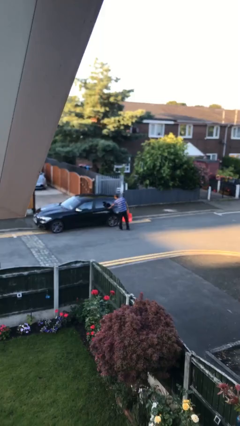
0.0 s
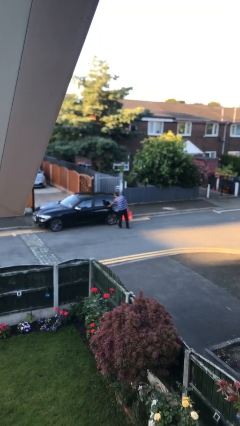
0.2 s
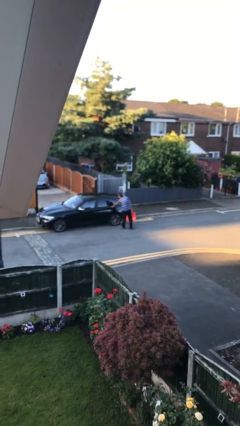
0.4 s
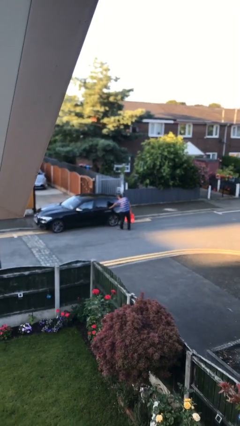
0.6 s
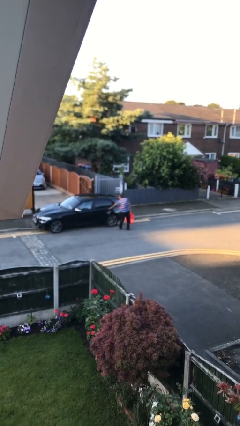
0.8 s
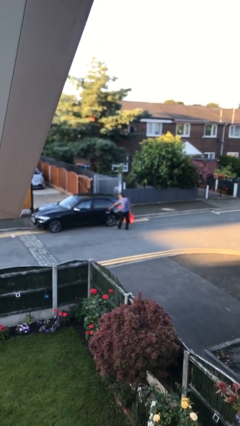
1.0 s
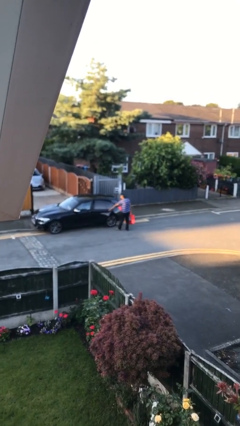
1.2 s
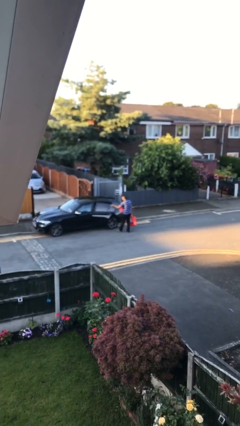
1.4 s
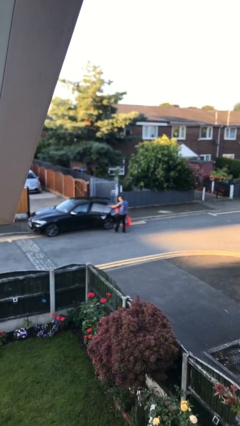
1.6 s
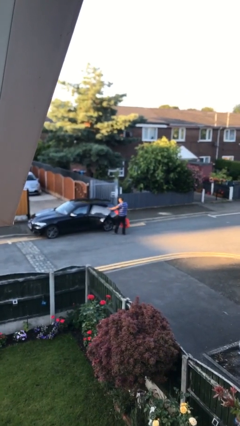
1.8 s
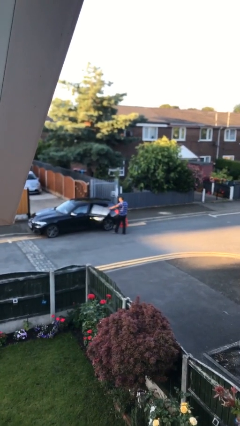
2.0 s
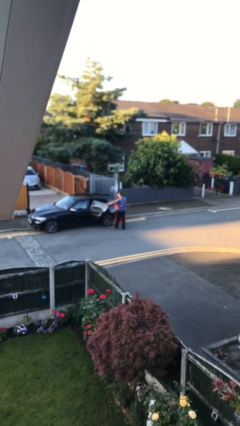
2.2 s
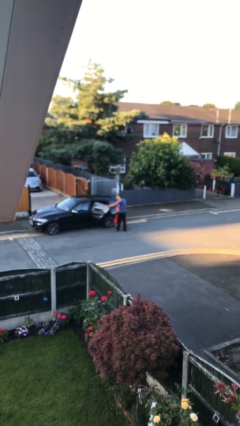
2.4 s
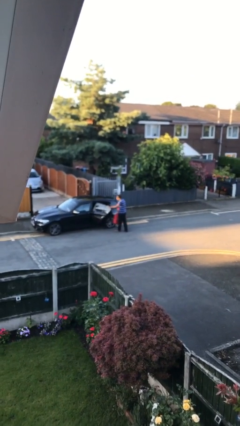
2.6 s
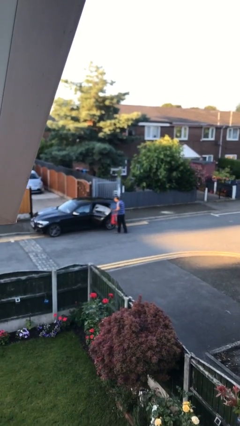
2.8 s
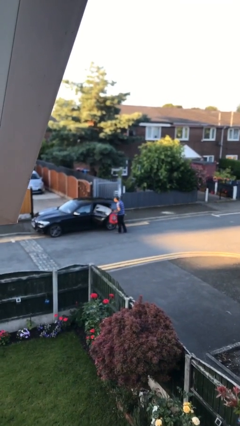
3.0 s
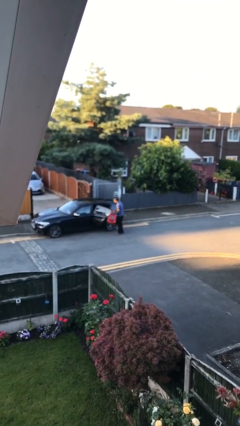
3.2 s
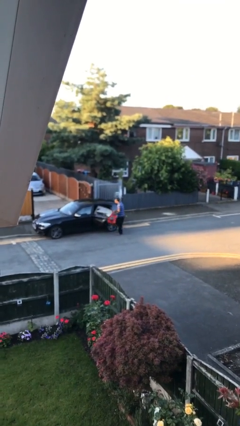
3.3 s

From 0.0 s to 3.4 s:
person opens car door

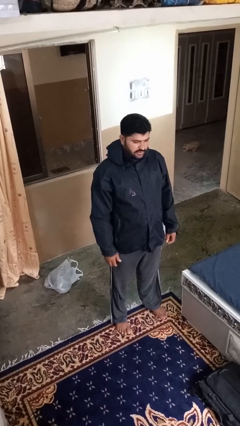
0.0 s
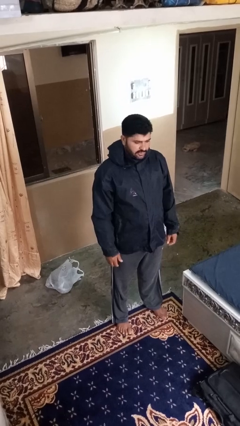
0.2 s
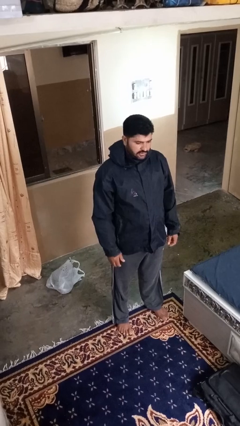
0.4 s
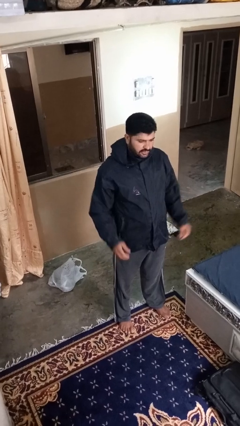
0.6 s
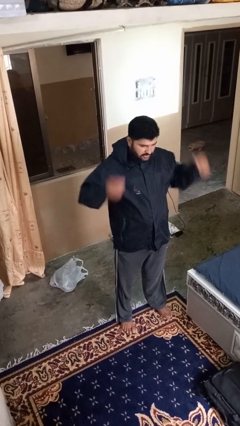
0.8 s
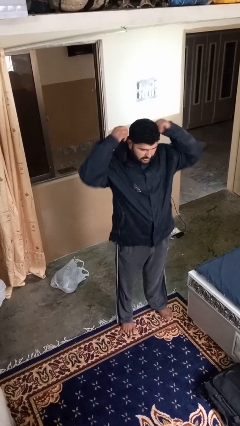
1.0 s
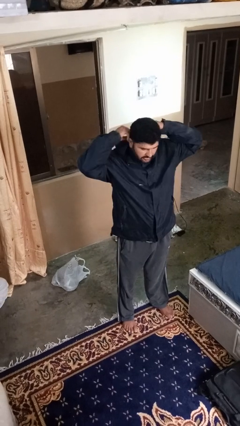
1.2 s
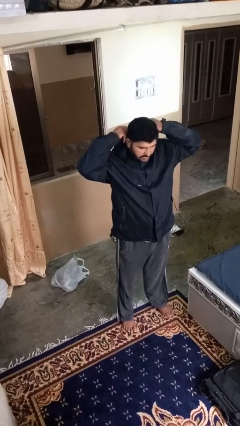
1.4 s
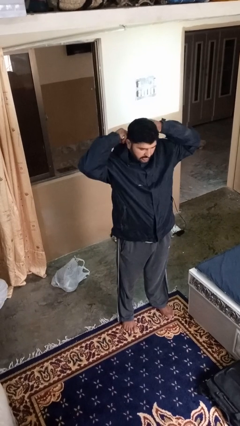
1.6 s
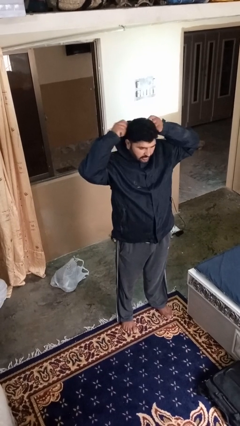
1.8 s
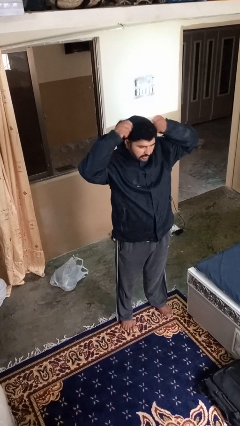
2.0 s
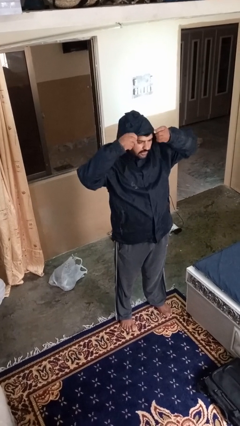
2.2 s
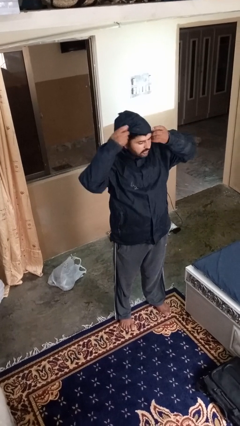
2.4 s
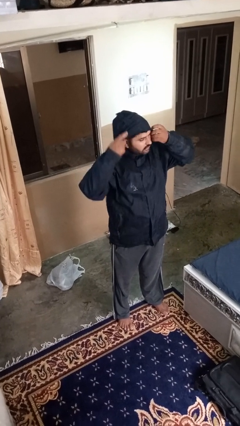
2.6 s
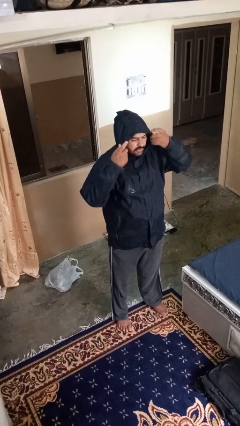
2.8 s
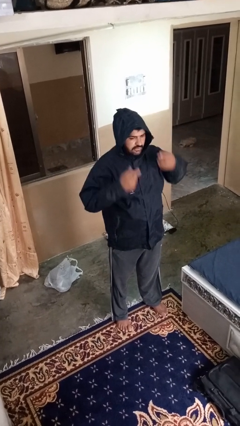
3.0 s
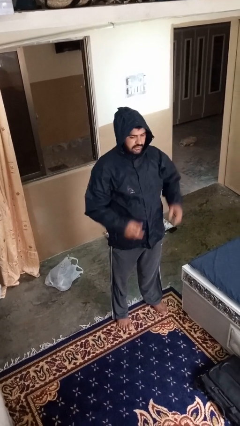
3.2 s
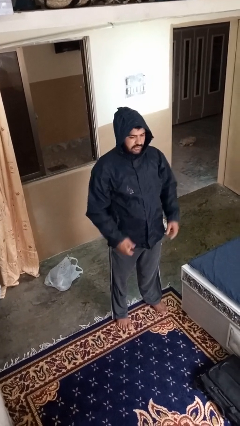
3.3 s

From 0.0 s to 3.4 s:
person puts on hoodie

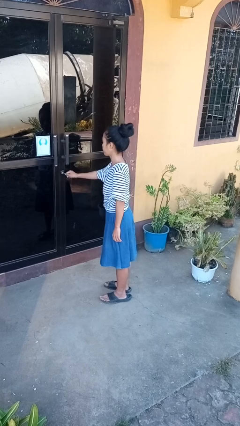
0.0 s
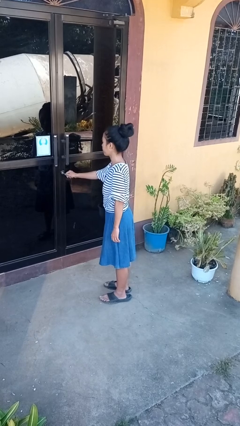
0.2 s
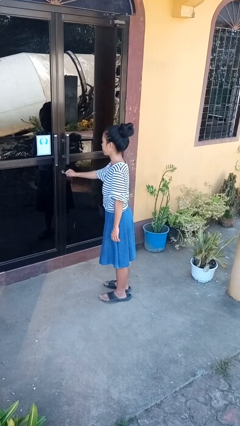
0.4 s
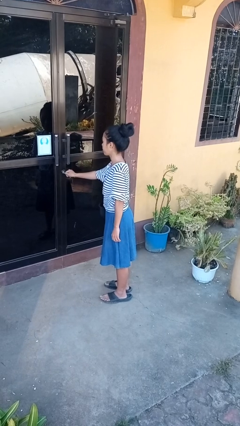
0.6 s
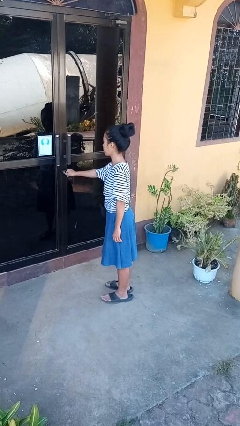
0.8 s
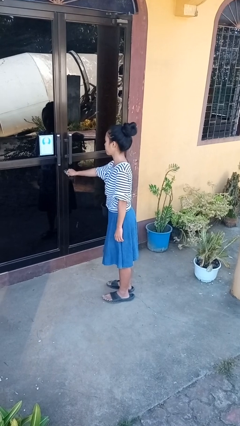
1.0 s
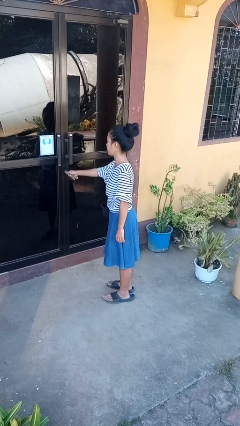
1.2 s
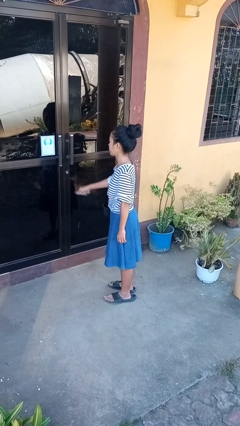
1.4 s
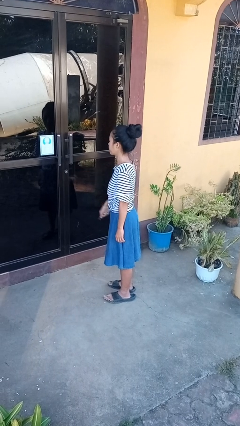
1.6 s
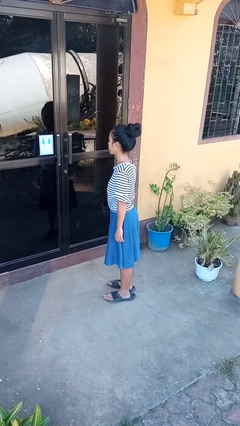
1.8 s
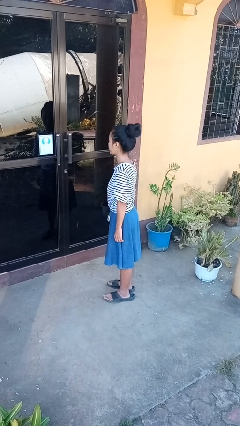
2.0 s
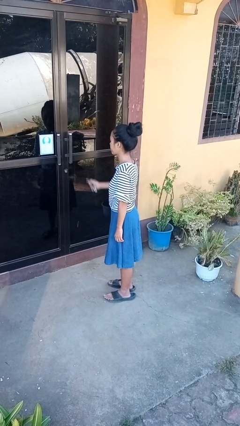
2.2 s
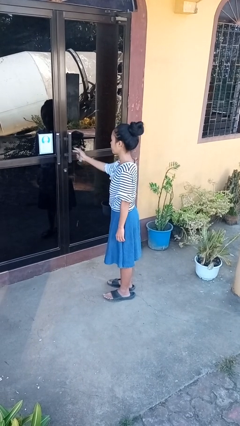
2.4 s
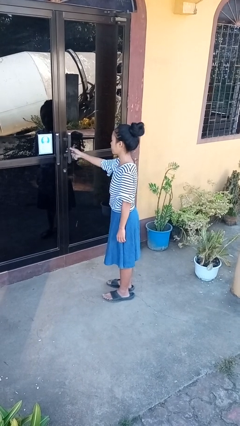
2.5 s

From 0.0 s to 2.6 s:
person unlocks door with keys

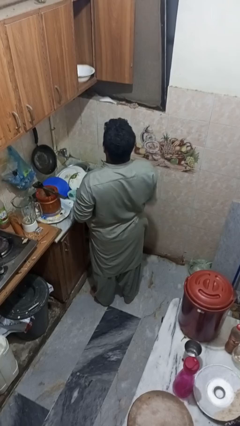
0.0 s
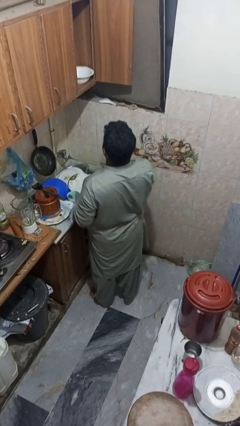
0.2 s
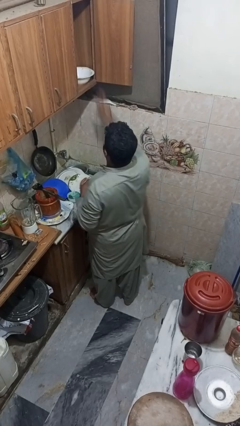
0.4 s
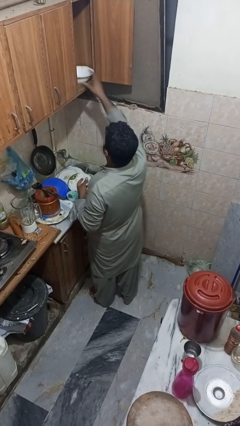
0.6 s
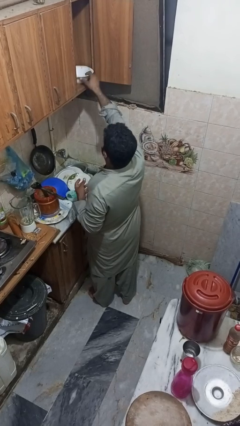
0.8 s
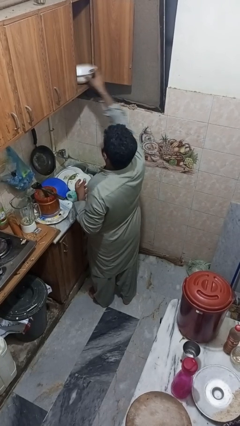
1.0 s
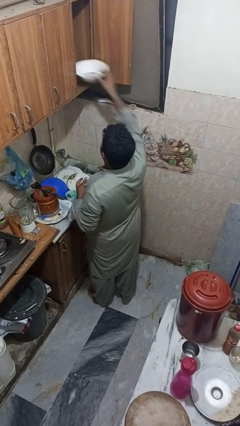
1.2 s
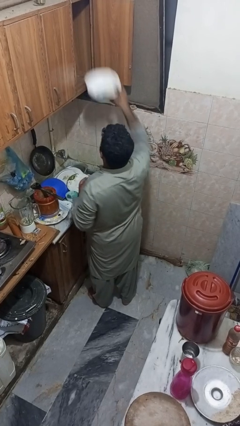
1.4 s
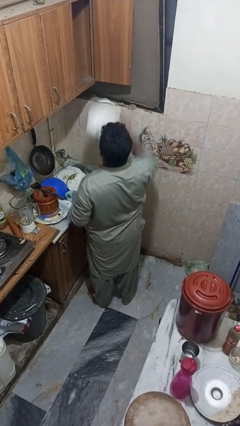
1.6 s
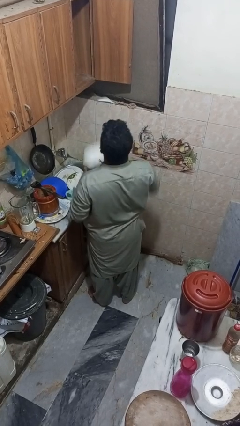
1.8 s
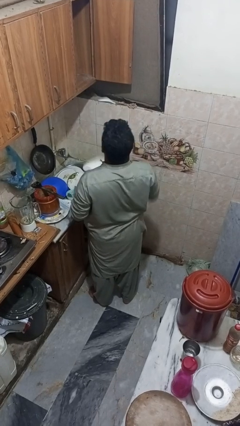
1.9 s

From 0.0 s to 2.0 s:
person takes object from cabinet

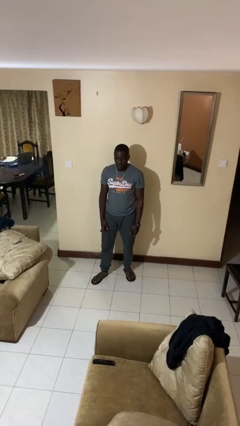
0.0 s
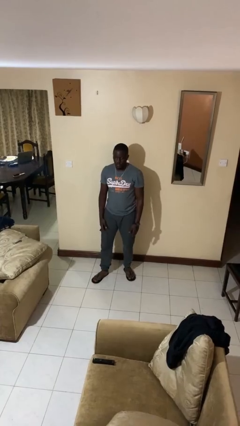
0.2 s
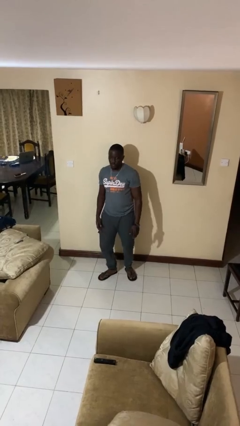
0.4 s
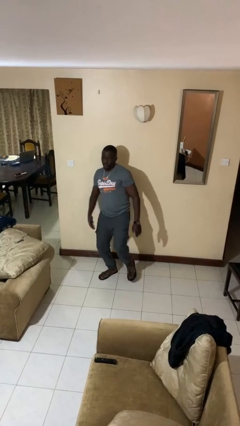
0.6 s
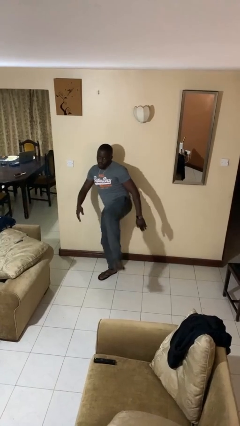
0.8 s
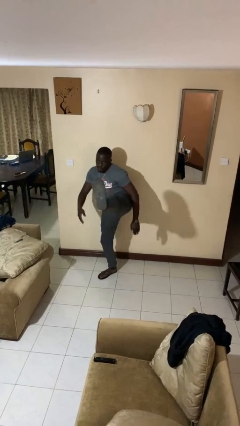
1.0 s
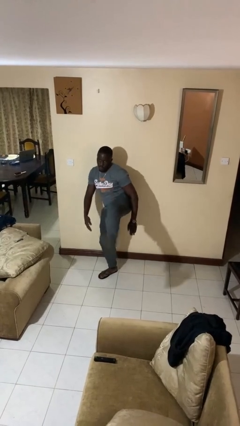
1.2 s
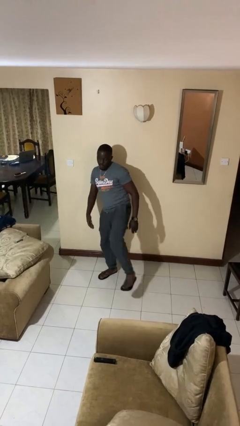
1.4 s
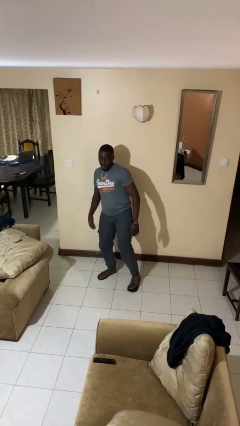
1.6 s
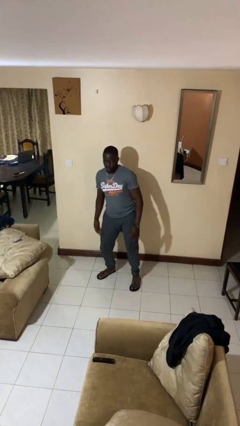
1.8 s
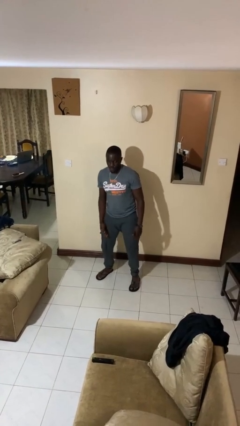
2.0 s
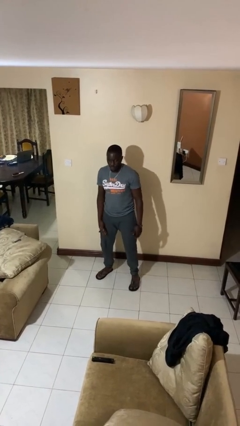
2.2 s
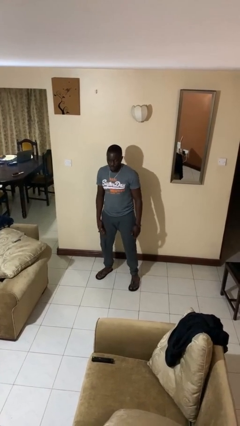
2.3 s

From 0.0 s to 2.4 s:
person karate kicks

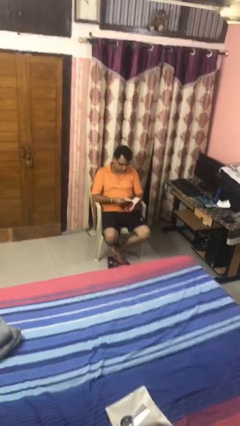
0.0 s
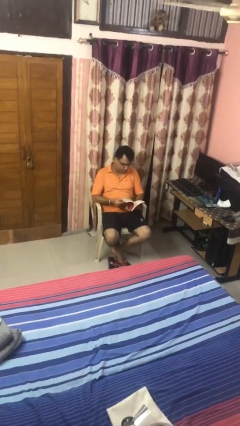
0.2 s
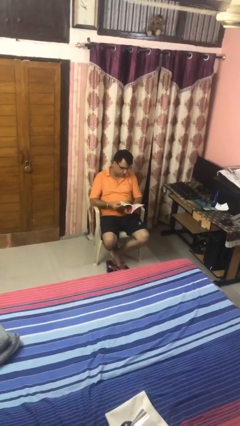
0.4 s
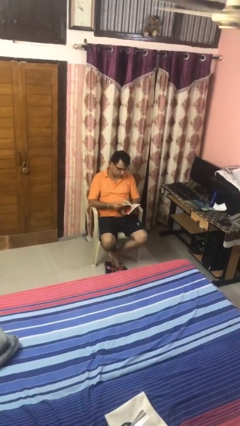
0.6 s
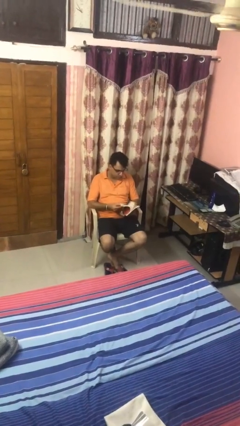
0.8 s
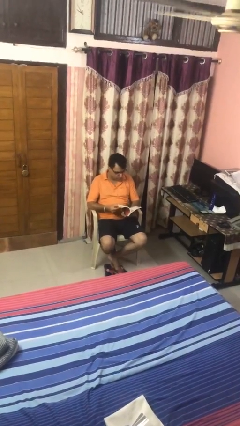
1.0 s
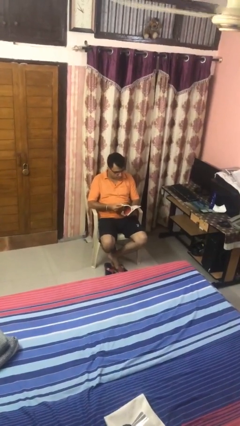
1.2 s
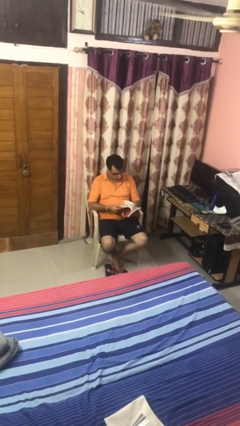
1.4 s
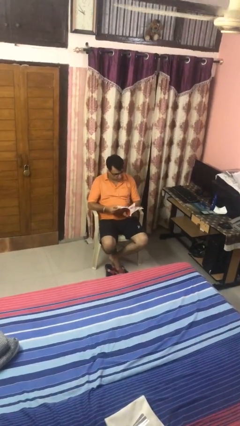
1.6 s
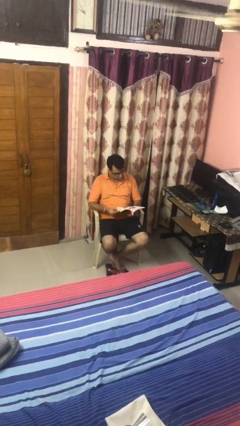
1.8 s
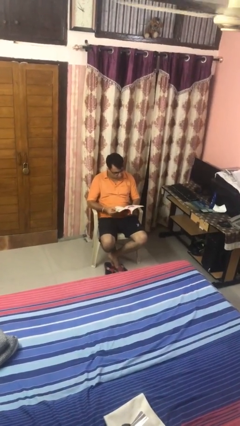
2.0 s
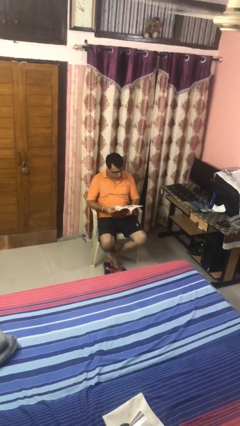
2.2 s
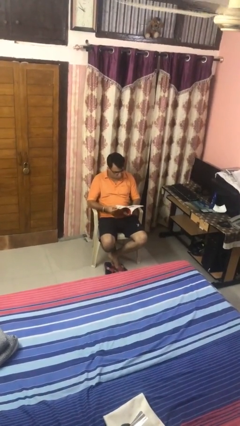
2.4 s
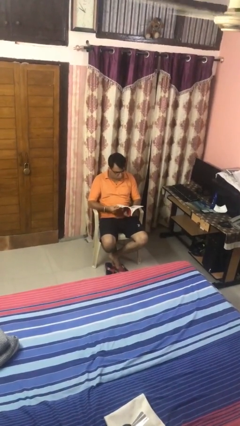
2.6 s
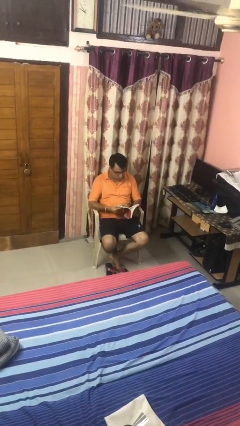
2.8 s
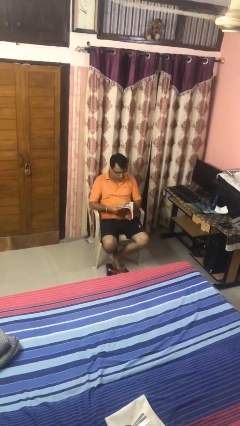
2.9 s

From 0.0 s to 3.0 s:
person reads magazine

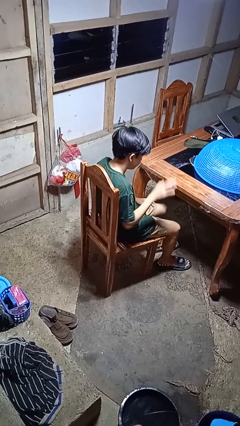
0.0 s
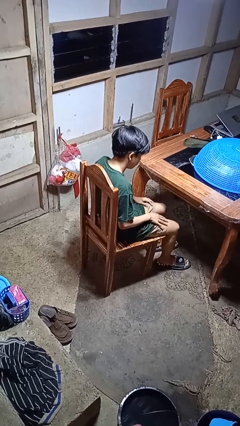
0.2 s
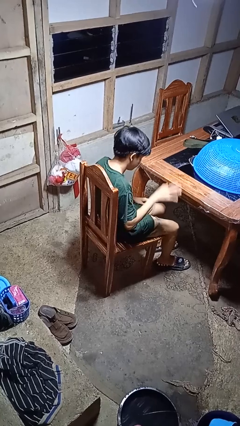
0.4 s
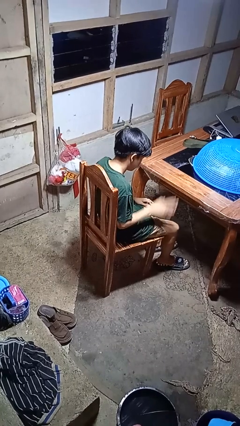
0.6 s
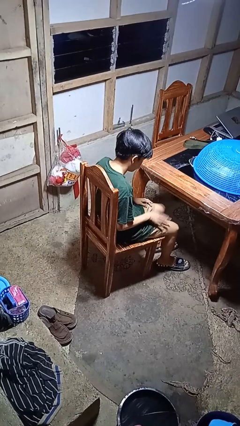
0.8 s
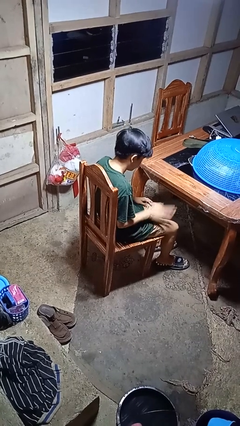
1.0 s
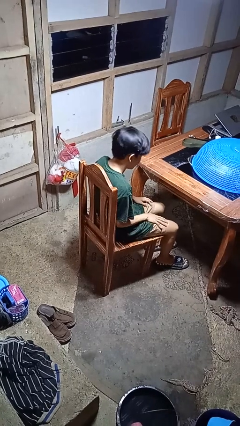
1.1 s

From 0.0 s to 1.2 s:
person slaps hands on thighs
